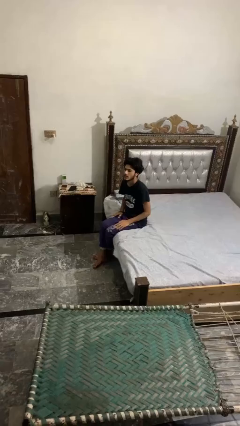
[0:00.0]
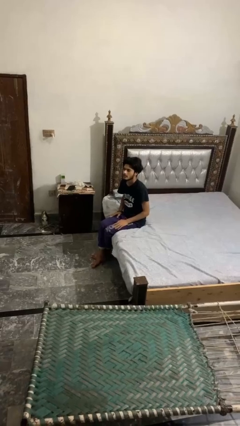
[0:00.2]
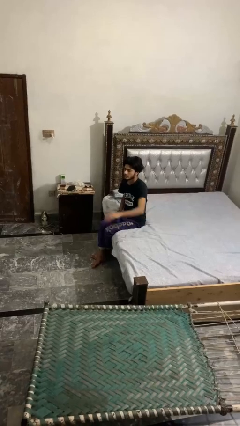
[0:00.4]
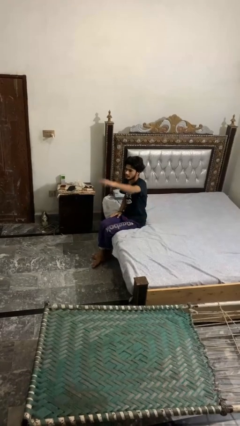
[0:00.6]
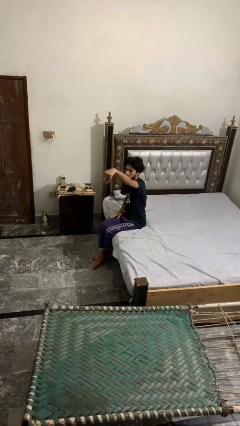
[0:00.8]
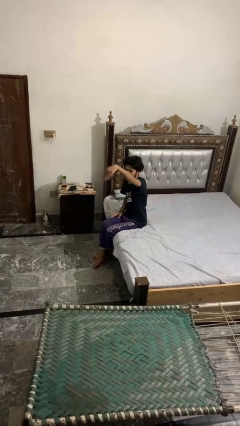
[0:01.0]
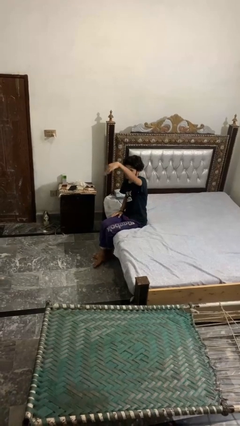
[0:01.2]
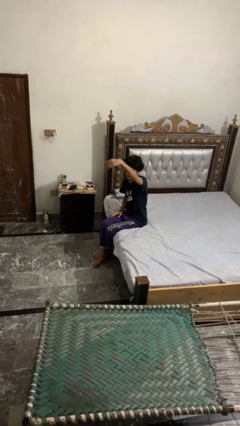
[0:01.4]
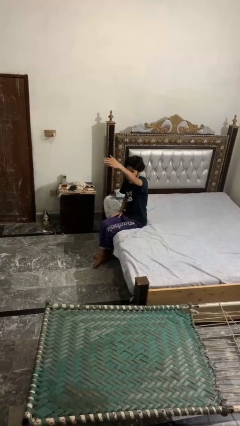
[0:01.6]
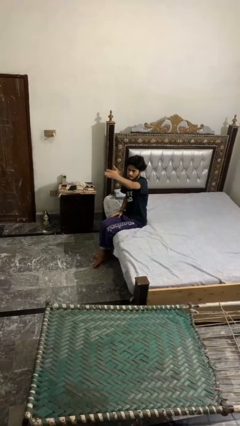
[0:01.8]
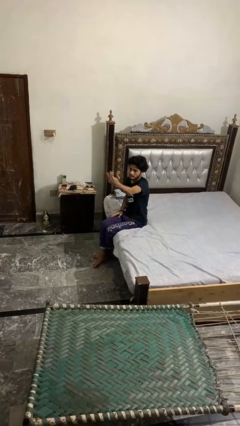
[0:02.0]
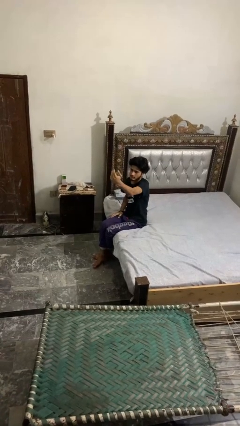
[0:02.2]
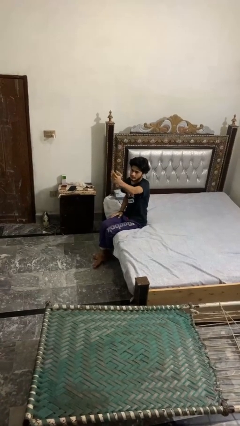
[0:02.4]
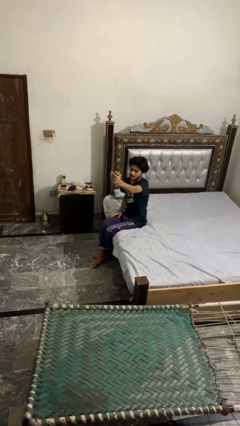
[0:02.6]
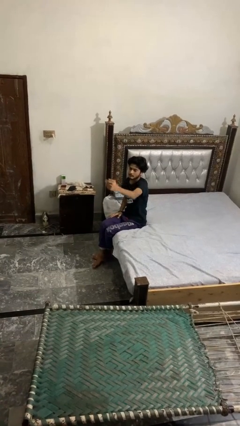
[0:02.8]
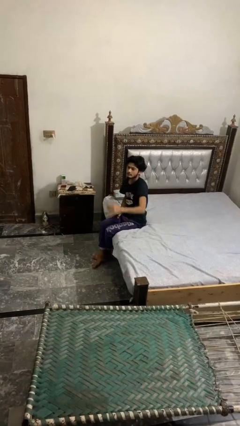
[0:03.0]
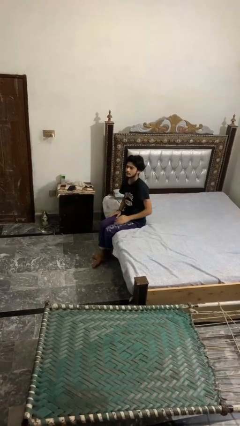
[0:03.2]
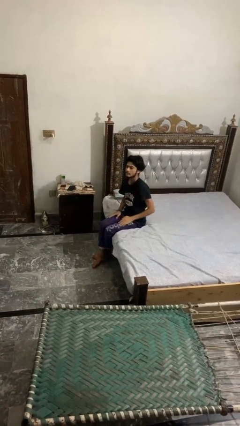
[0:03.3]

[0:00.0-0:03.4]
person gestures come here

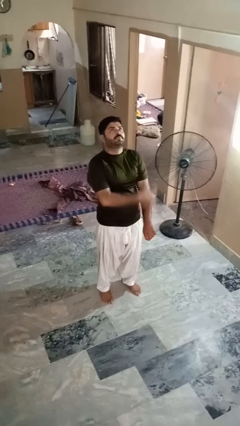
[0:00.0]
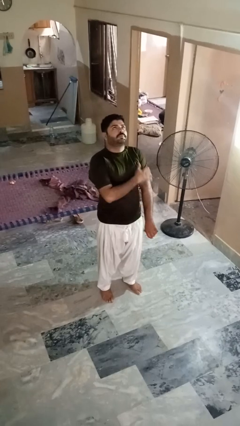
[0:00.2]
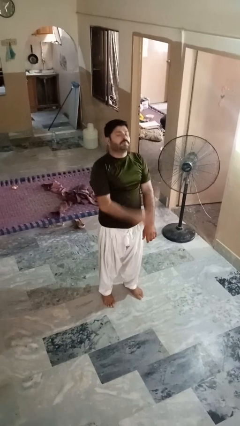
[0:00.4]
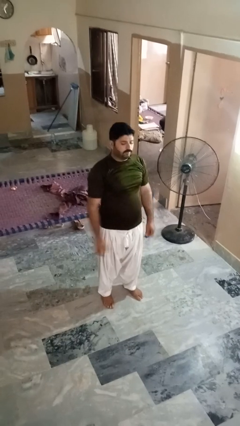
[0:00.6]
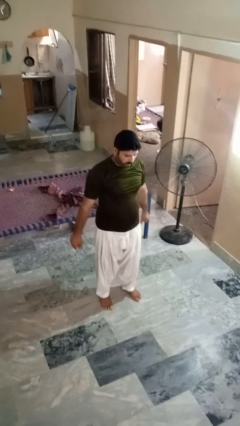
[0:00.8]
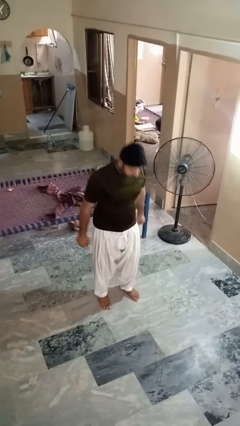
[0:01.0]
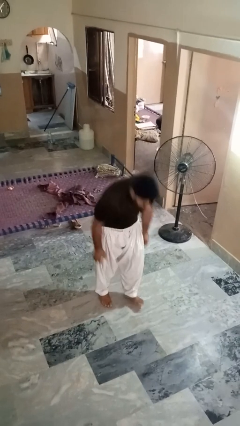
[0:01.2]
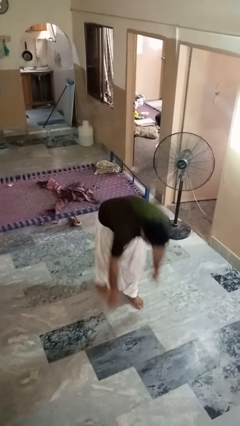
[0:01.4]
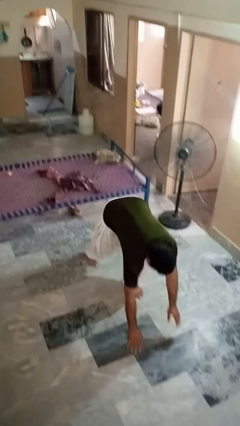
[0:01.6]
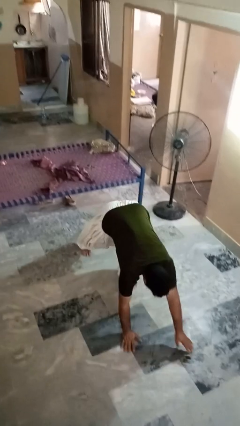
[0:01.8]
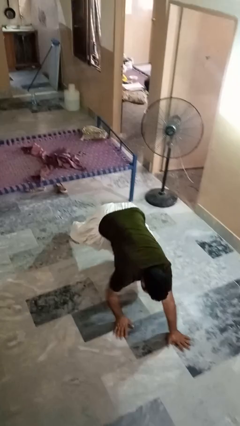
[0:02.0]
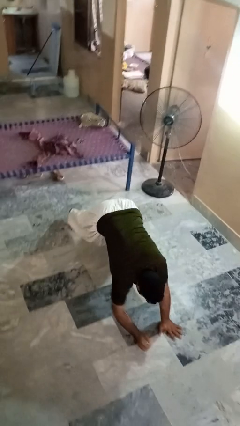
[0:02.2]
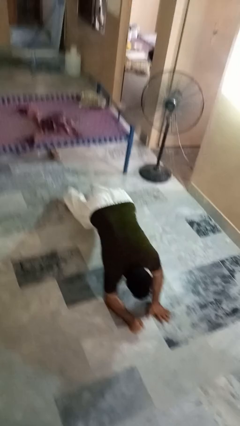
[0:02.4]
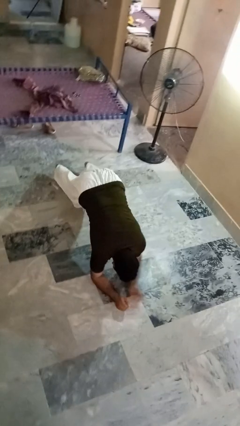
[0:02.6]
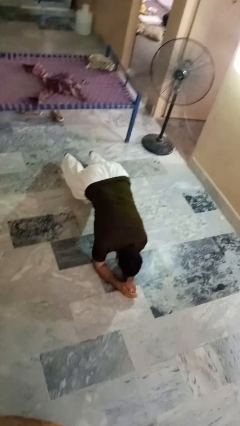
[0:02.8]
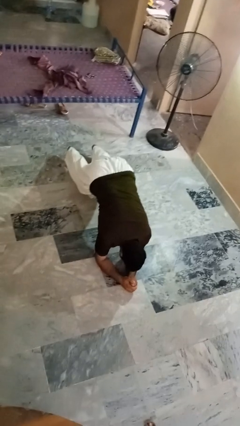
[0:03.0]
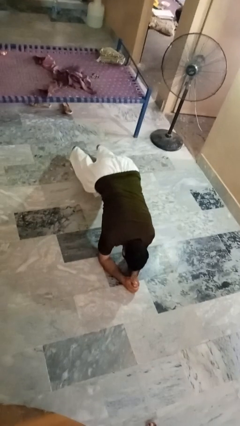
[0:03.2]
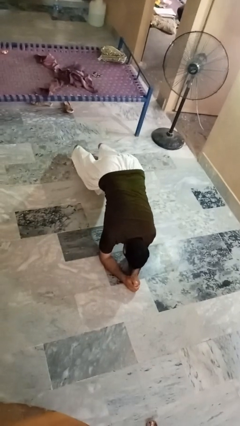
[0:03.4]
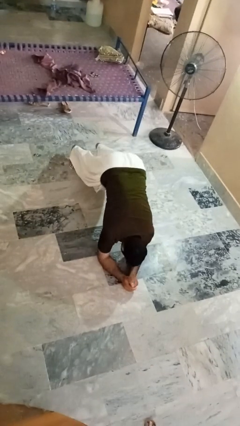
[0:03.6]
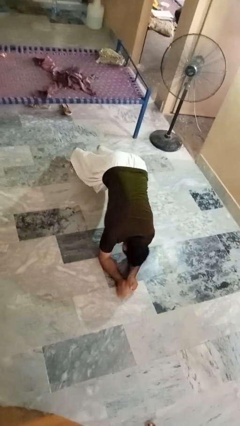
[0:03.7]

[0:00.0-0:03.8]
person exercises with plank

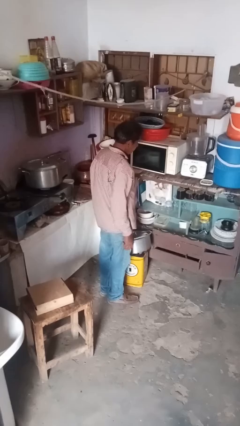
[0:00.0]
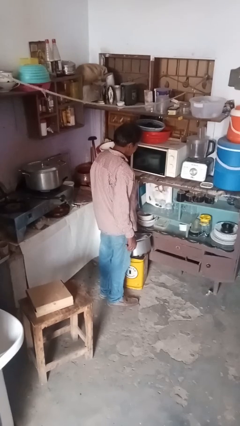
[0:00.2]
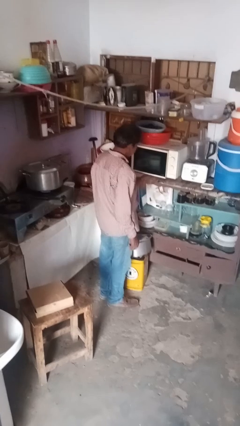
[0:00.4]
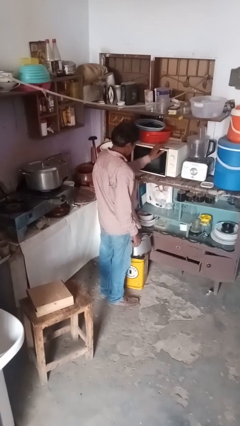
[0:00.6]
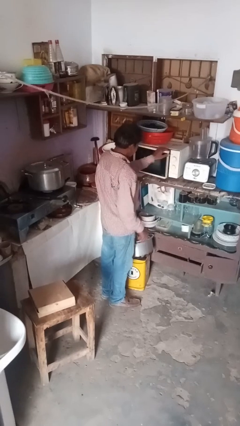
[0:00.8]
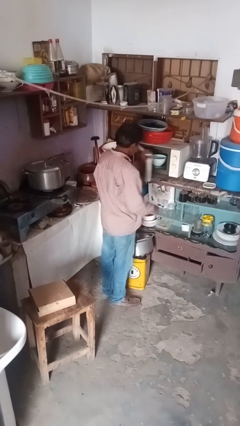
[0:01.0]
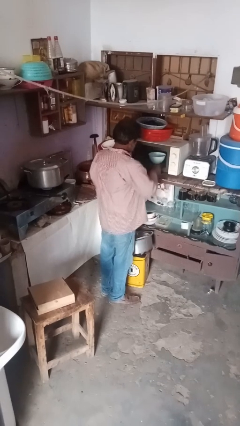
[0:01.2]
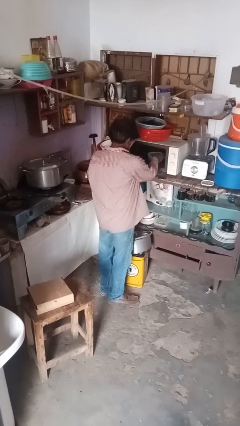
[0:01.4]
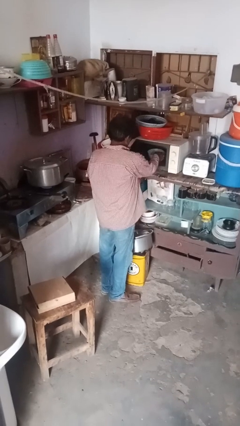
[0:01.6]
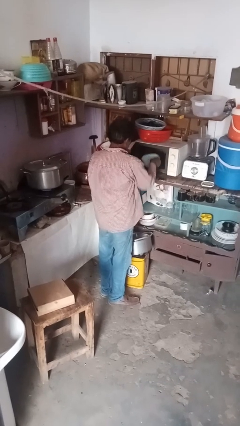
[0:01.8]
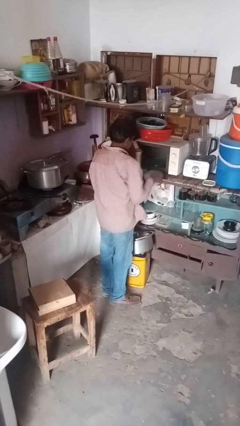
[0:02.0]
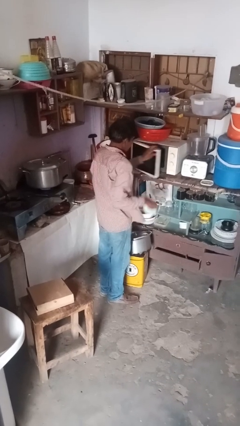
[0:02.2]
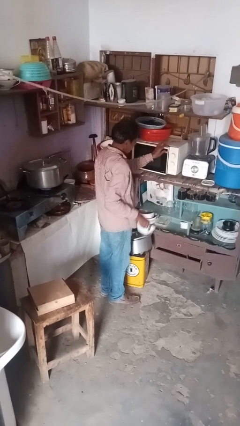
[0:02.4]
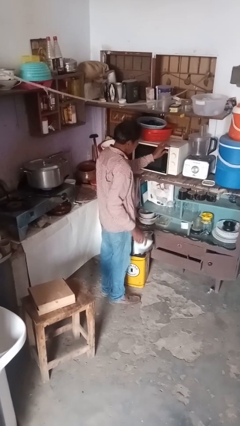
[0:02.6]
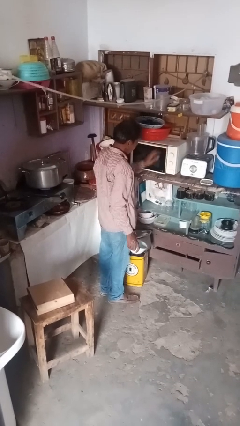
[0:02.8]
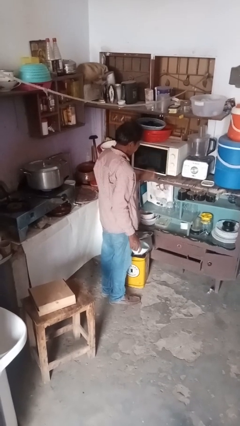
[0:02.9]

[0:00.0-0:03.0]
person takes object from microwave

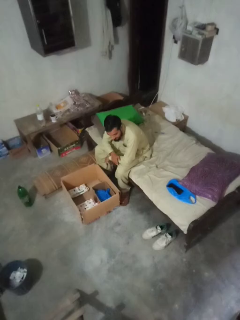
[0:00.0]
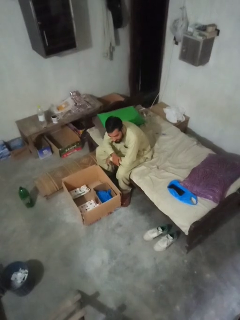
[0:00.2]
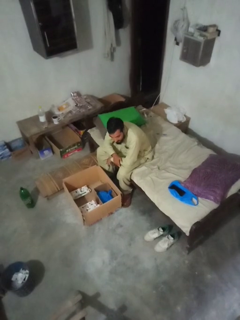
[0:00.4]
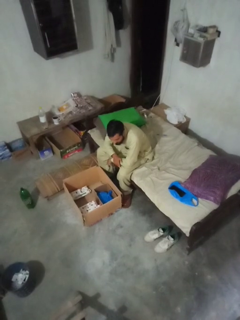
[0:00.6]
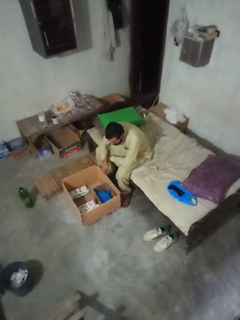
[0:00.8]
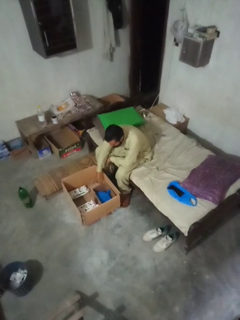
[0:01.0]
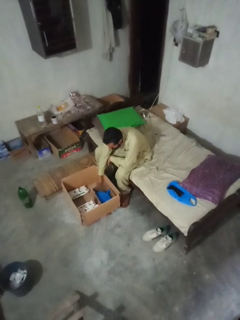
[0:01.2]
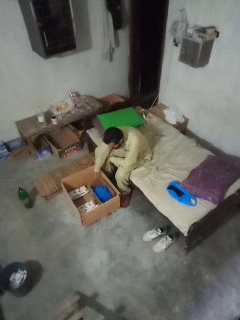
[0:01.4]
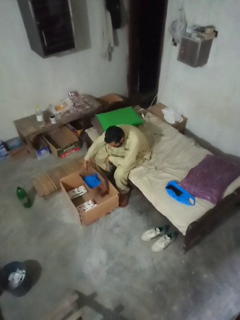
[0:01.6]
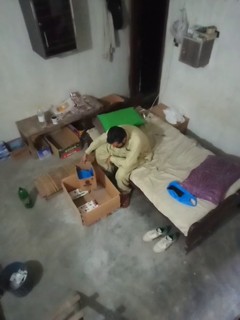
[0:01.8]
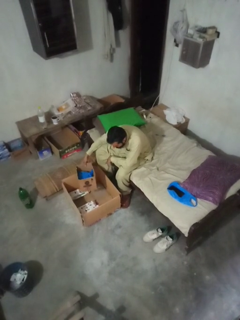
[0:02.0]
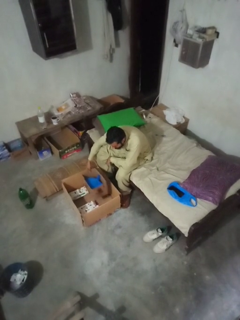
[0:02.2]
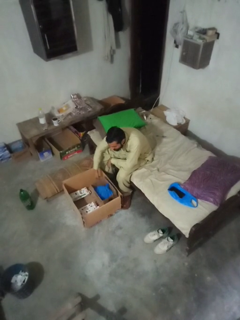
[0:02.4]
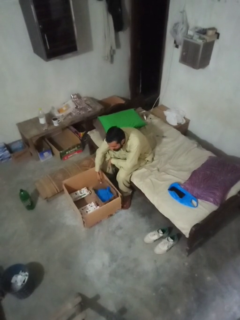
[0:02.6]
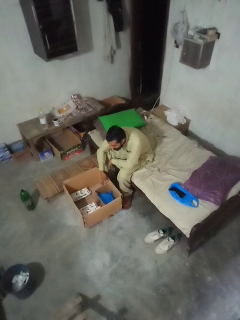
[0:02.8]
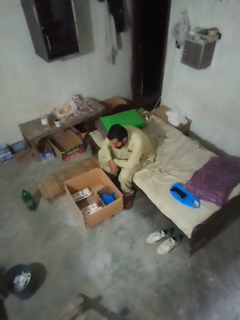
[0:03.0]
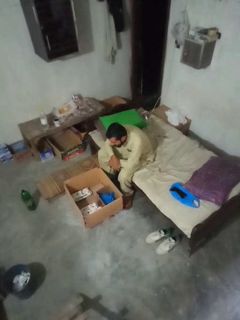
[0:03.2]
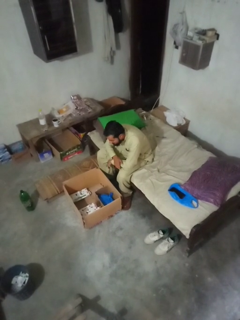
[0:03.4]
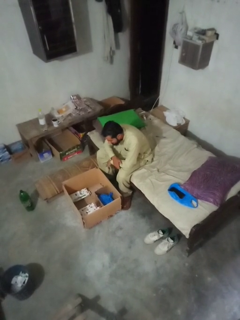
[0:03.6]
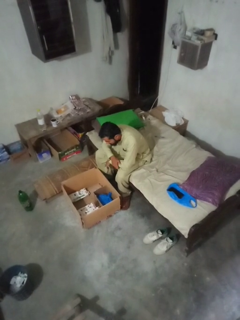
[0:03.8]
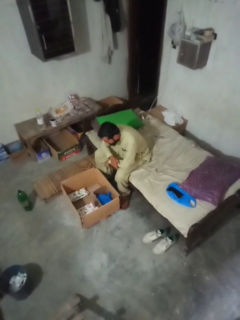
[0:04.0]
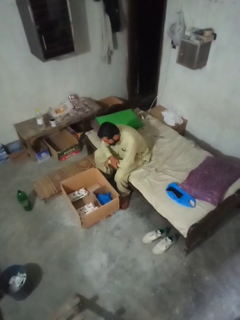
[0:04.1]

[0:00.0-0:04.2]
person searches in box

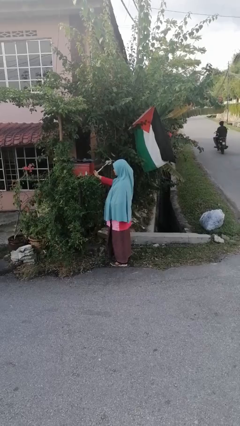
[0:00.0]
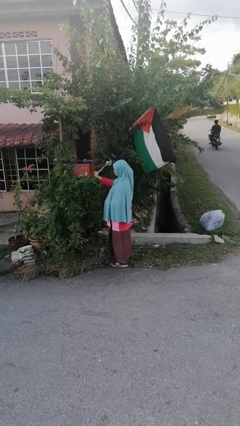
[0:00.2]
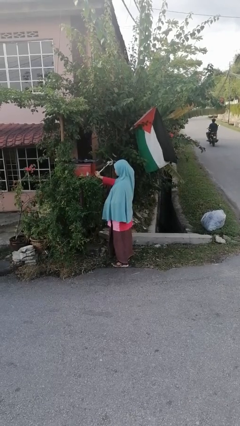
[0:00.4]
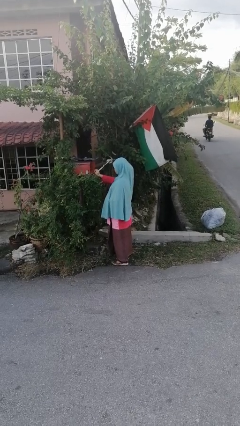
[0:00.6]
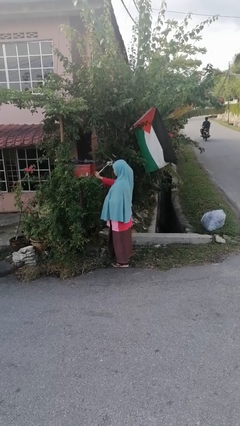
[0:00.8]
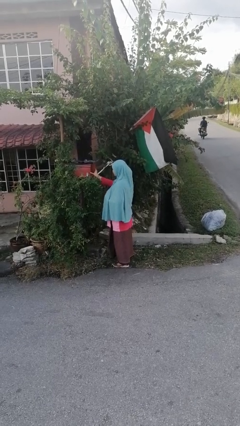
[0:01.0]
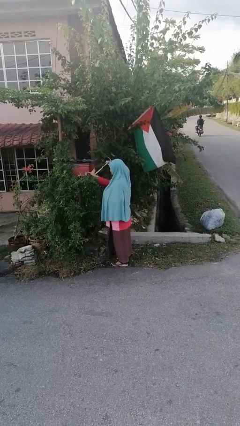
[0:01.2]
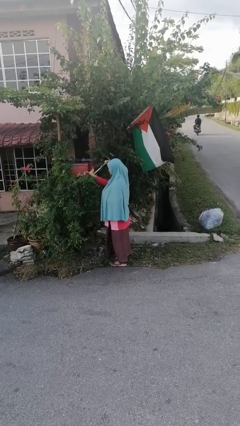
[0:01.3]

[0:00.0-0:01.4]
person closes mailbox

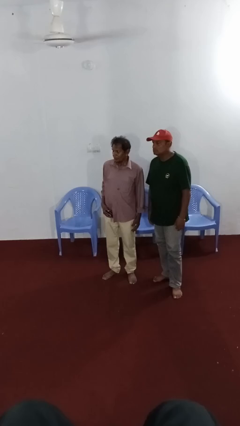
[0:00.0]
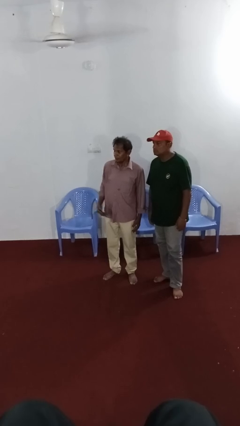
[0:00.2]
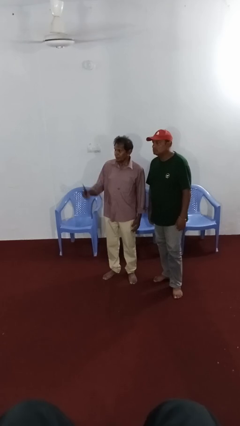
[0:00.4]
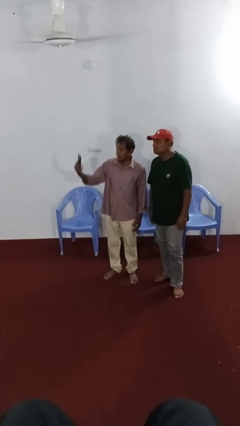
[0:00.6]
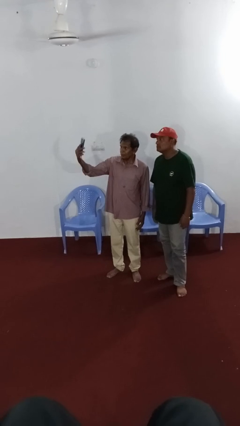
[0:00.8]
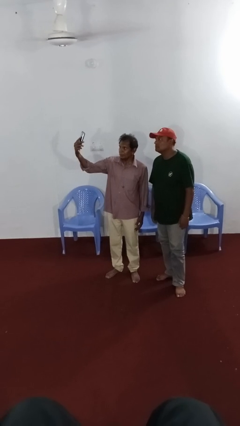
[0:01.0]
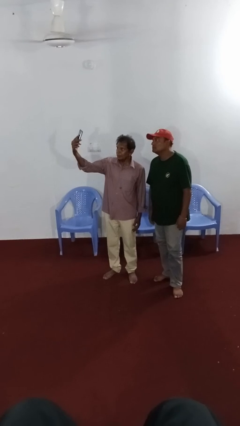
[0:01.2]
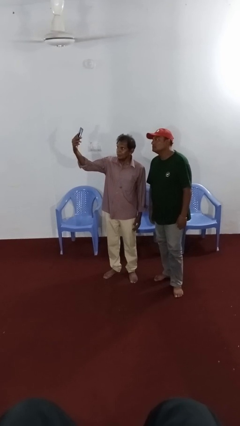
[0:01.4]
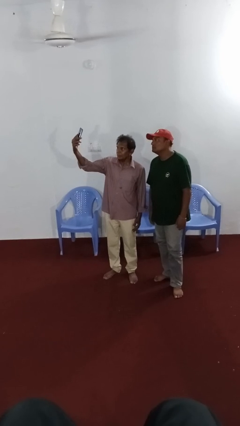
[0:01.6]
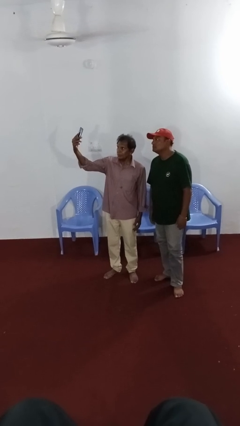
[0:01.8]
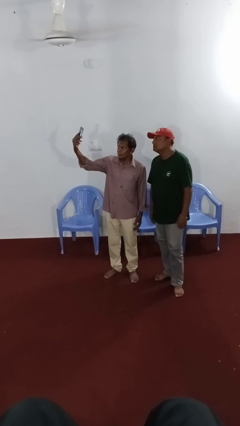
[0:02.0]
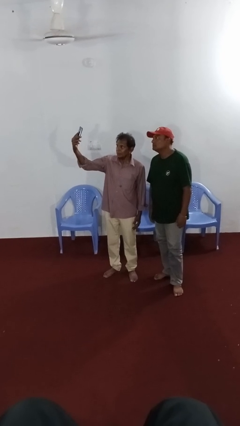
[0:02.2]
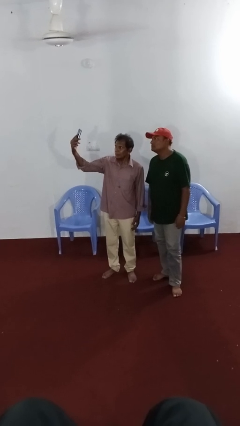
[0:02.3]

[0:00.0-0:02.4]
person takes selfie with person
